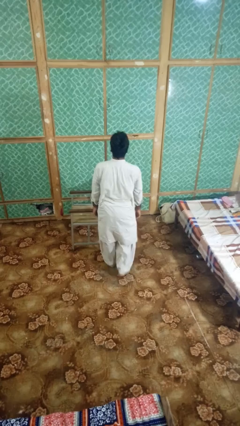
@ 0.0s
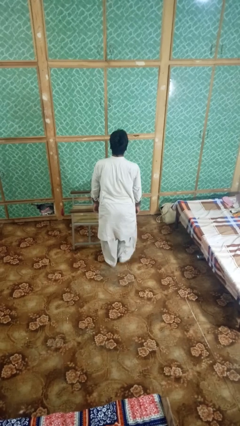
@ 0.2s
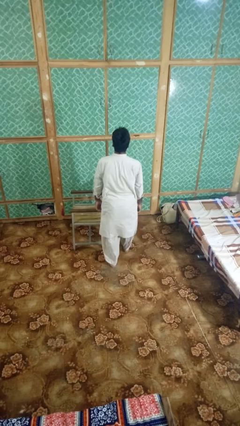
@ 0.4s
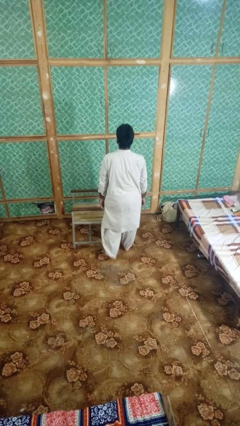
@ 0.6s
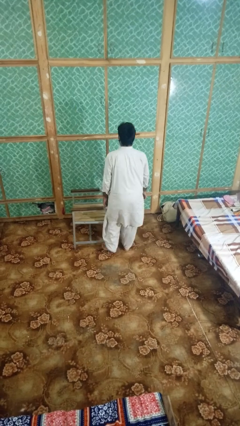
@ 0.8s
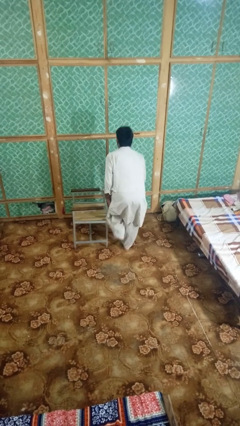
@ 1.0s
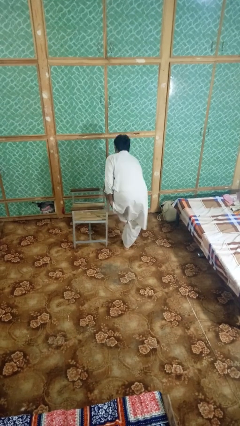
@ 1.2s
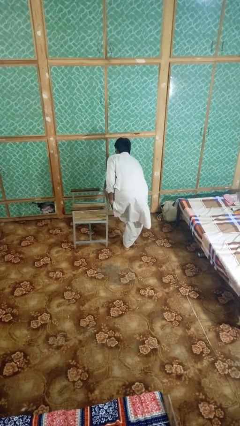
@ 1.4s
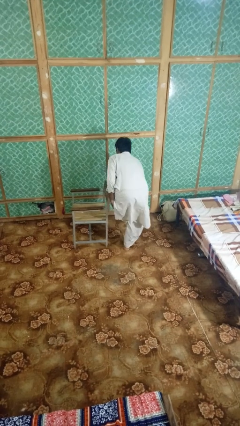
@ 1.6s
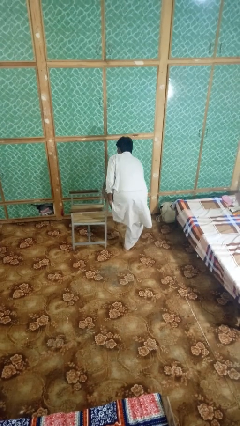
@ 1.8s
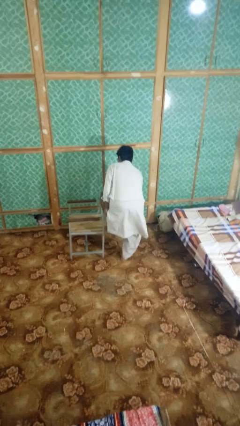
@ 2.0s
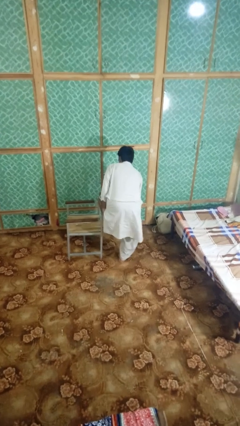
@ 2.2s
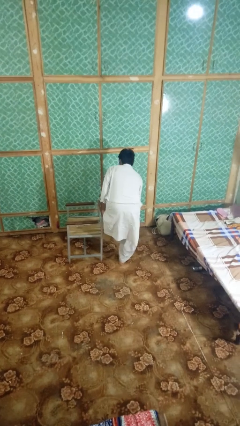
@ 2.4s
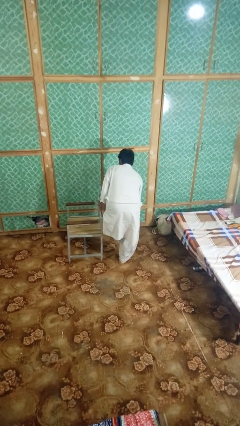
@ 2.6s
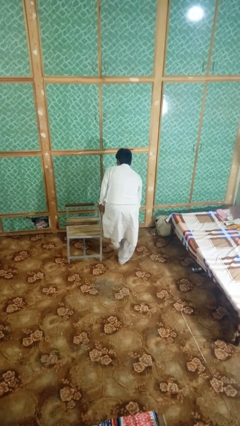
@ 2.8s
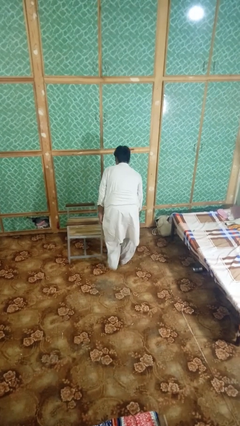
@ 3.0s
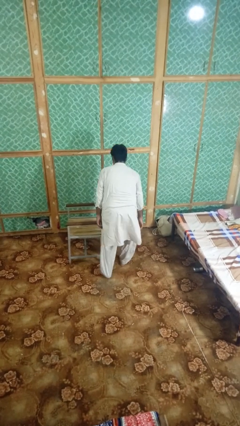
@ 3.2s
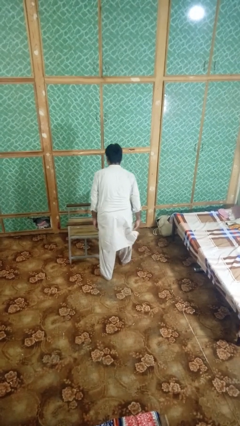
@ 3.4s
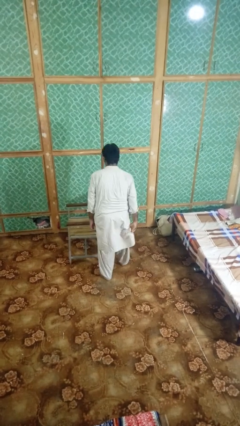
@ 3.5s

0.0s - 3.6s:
person stubs toe

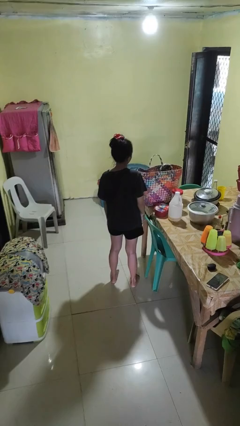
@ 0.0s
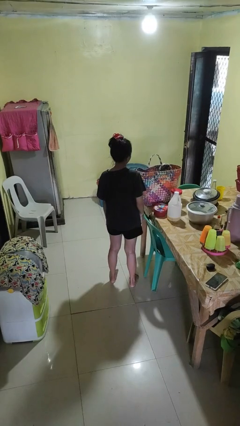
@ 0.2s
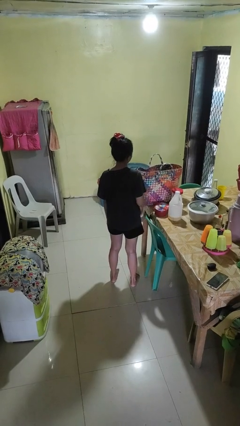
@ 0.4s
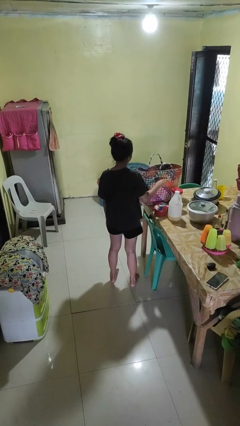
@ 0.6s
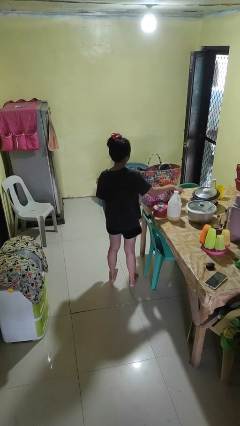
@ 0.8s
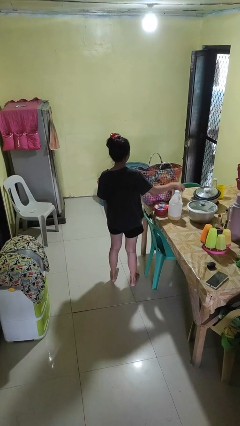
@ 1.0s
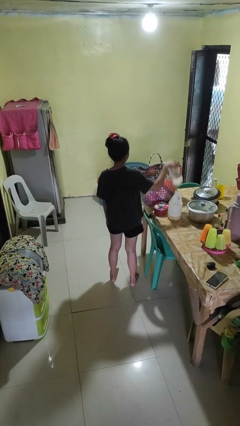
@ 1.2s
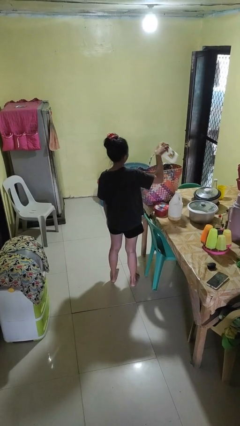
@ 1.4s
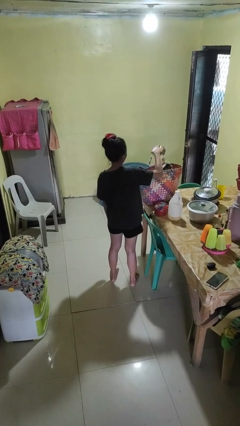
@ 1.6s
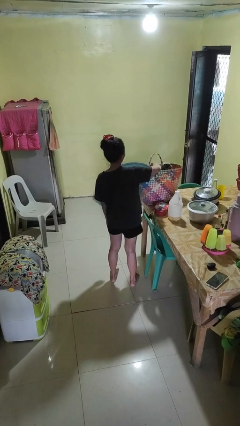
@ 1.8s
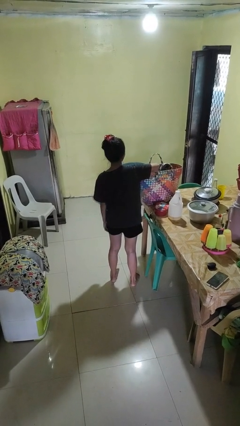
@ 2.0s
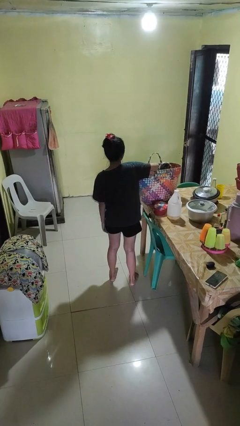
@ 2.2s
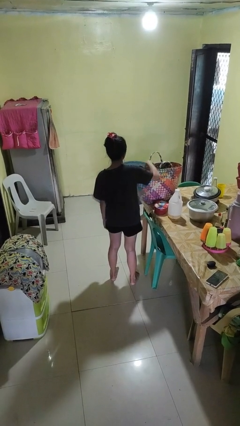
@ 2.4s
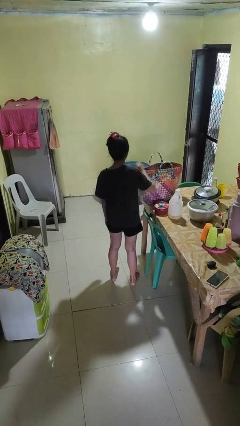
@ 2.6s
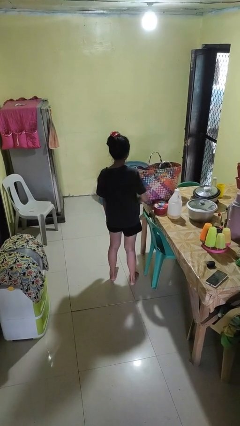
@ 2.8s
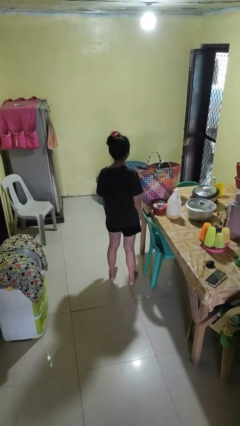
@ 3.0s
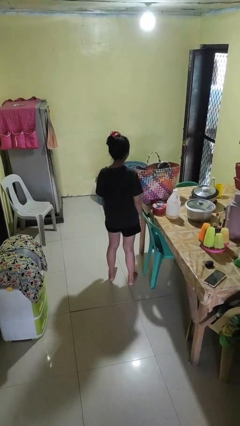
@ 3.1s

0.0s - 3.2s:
person puts object into basket

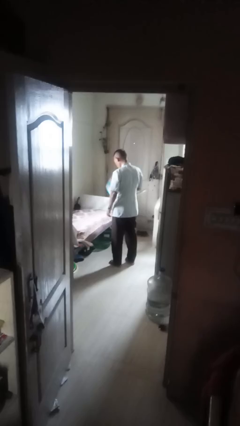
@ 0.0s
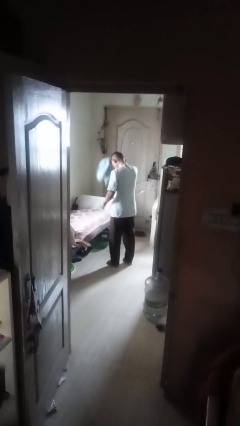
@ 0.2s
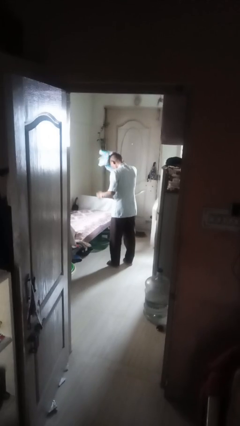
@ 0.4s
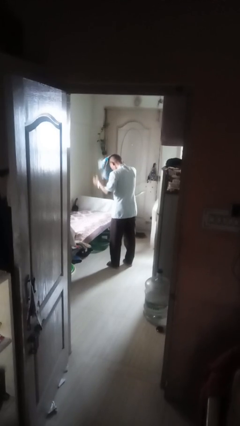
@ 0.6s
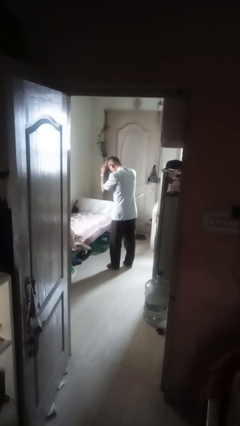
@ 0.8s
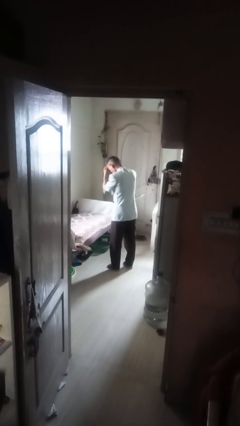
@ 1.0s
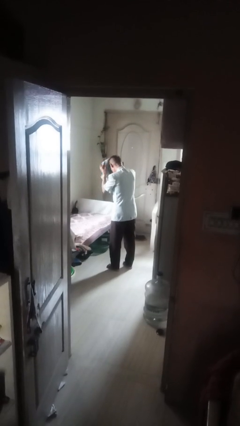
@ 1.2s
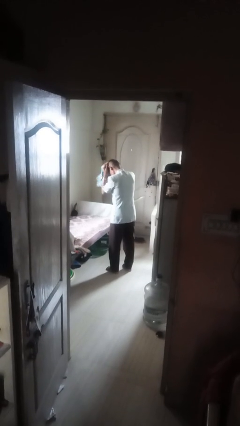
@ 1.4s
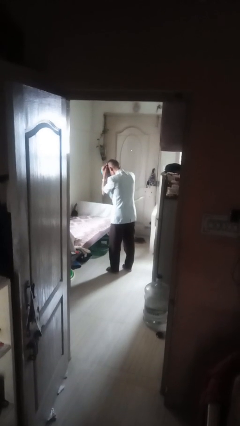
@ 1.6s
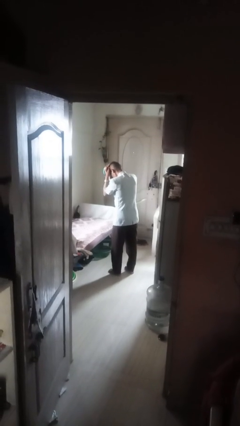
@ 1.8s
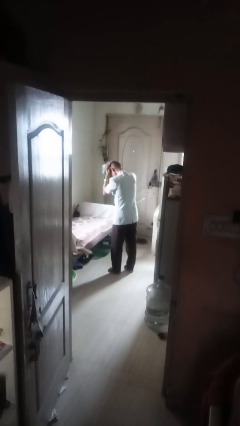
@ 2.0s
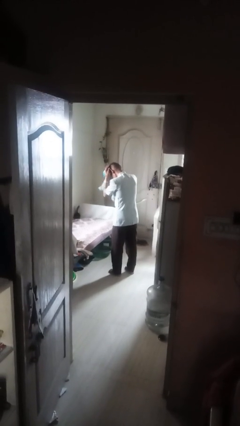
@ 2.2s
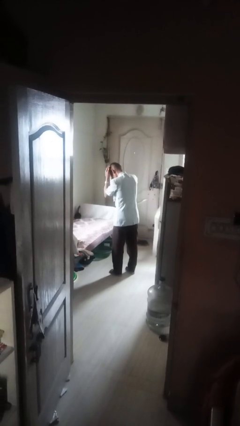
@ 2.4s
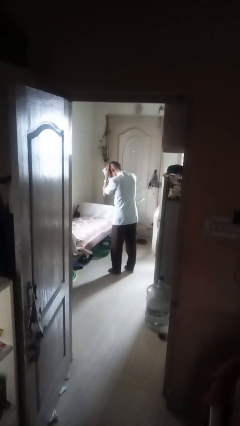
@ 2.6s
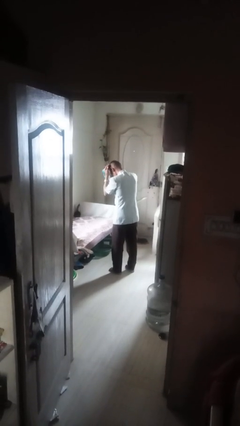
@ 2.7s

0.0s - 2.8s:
person dries hair with towel

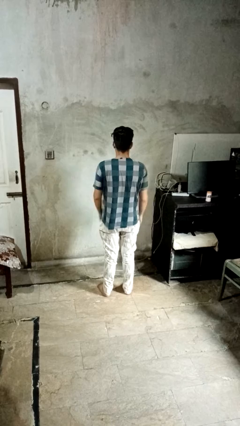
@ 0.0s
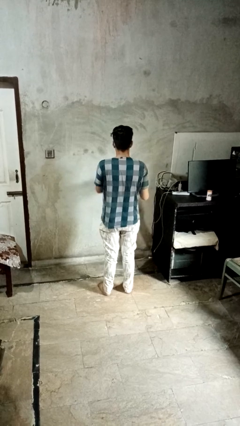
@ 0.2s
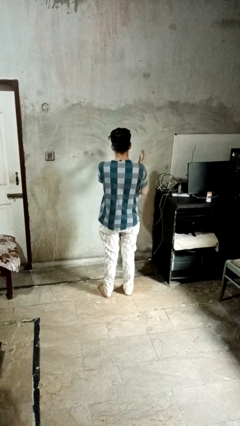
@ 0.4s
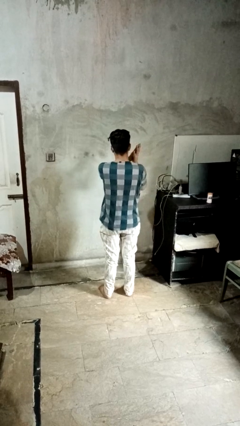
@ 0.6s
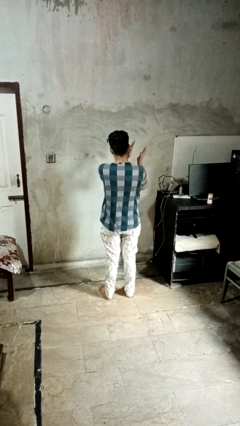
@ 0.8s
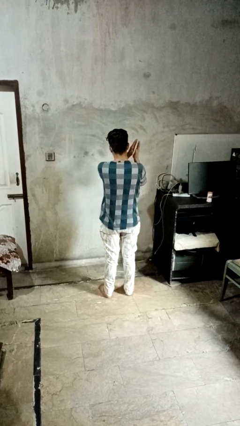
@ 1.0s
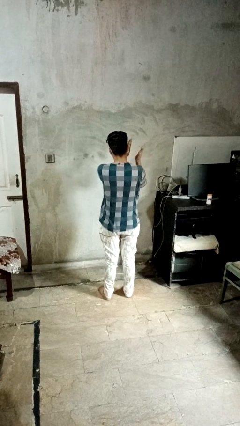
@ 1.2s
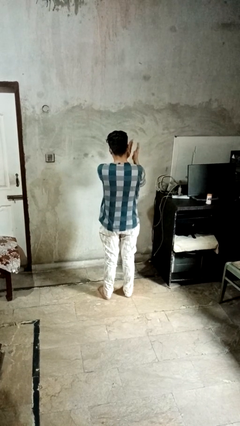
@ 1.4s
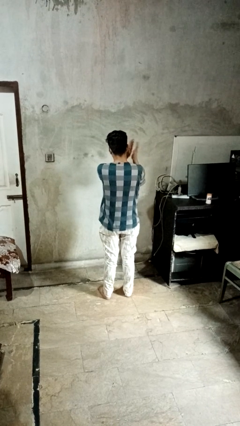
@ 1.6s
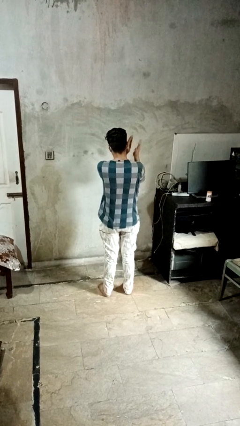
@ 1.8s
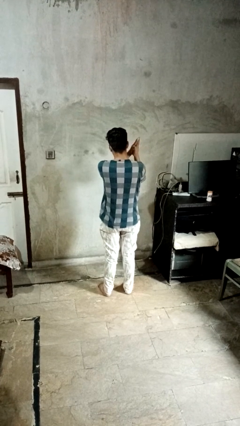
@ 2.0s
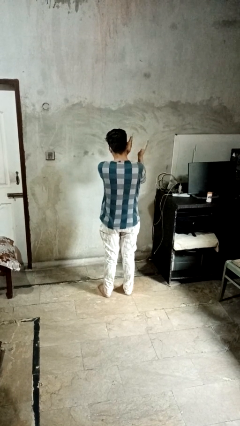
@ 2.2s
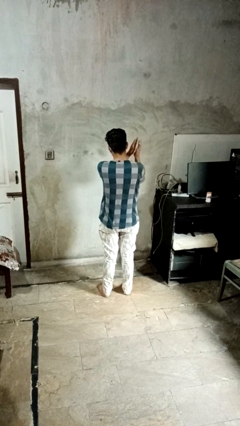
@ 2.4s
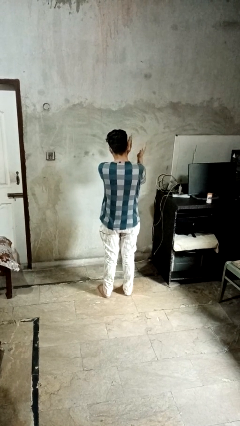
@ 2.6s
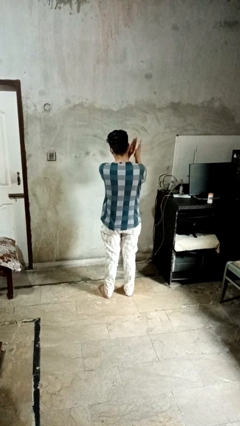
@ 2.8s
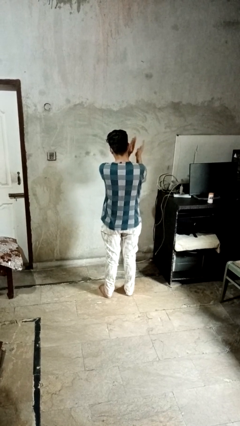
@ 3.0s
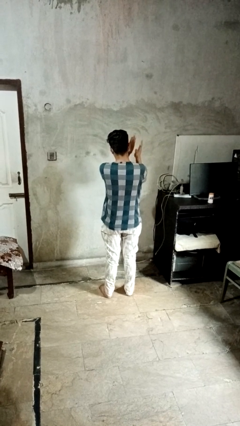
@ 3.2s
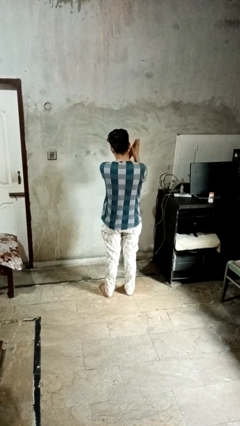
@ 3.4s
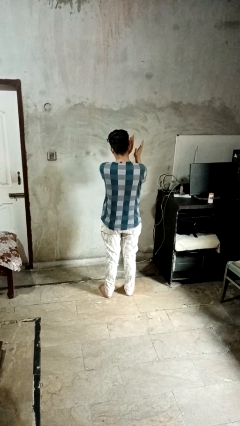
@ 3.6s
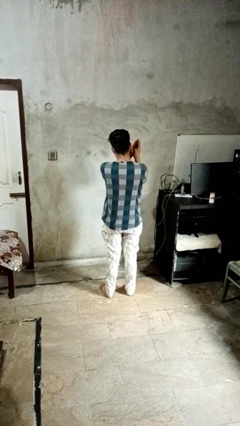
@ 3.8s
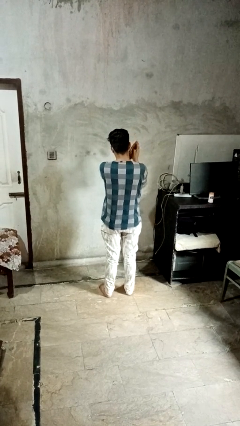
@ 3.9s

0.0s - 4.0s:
person claps hands

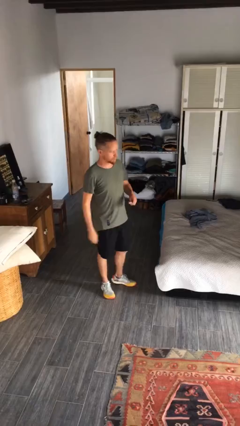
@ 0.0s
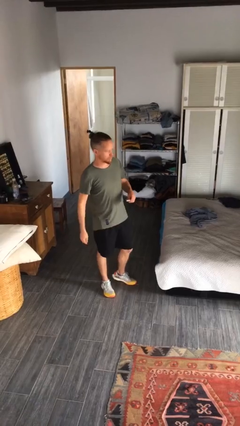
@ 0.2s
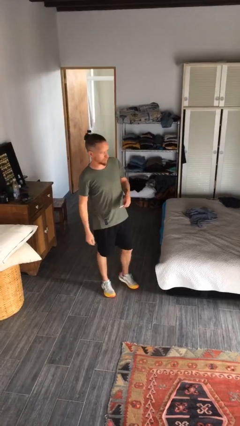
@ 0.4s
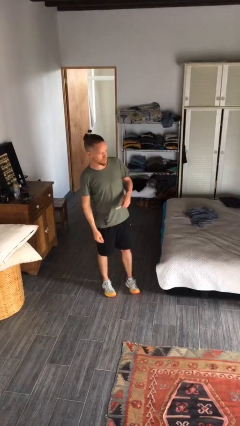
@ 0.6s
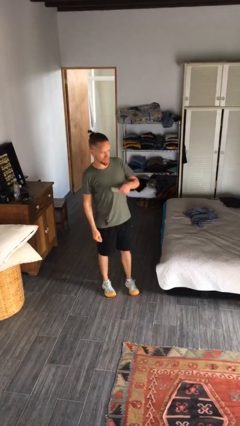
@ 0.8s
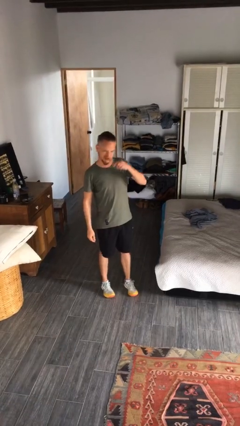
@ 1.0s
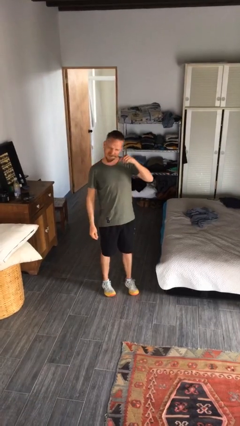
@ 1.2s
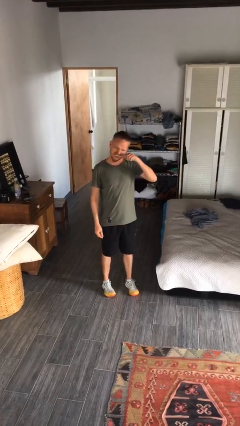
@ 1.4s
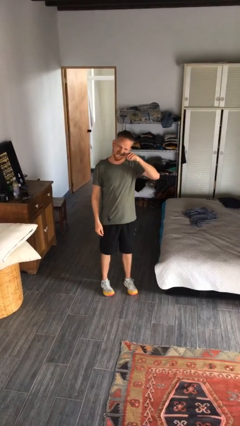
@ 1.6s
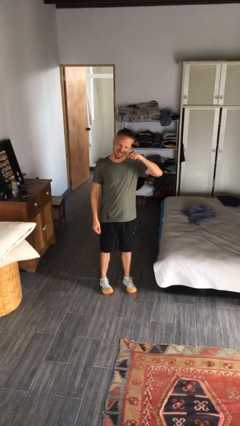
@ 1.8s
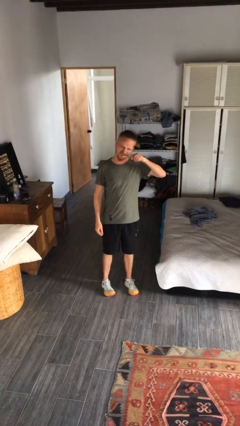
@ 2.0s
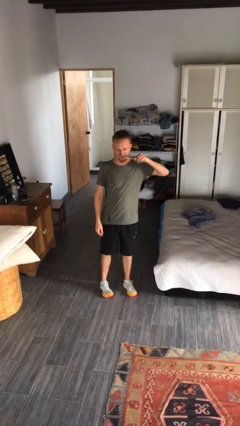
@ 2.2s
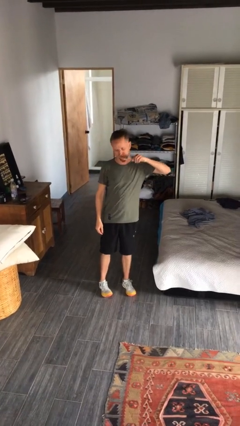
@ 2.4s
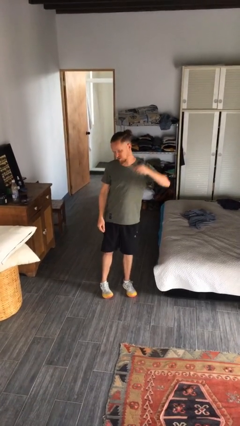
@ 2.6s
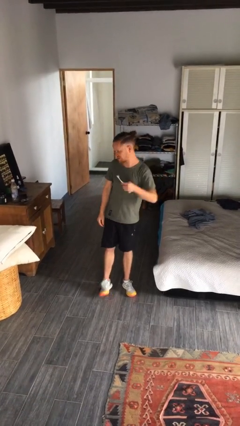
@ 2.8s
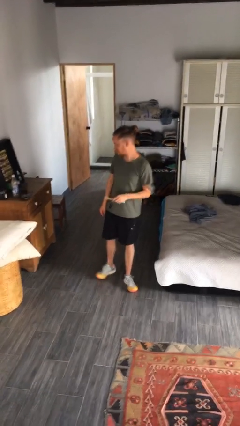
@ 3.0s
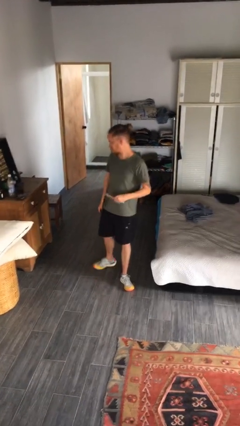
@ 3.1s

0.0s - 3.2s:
person brushes teeth

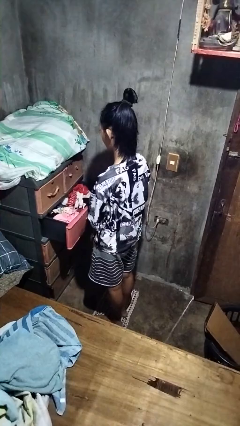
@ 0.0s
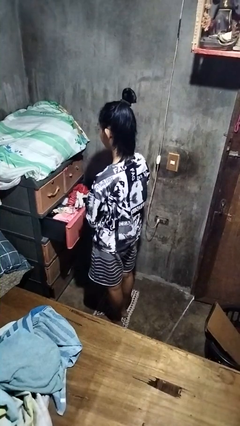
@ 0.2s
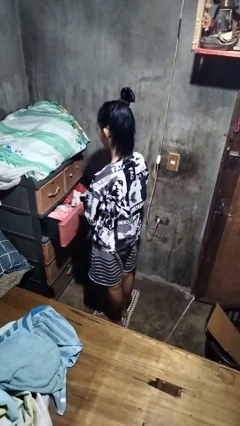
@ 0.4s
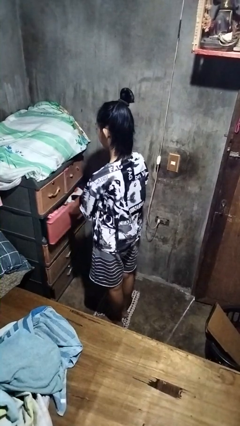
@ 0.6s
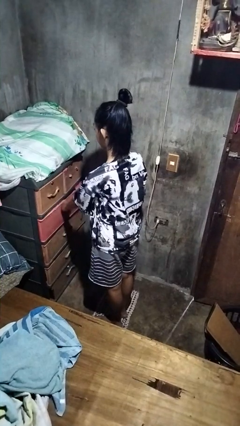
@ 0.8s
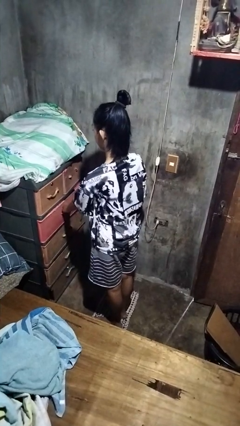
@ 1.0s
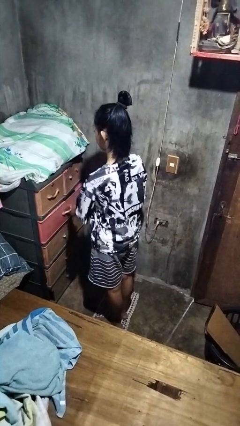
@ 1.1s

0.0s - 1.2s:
person closes dresser drawer
